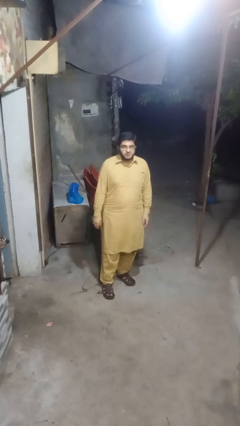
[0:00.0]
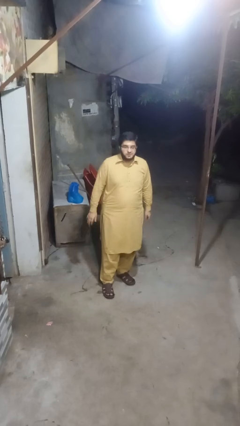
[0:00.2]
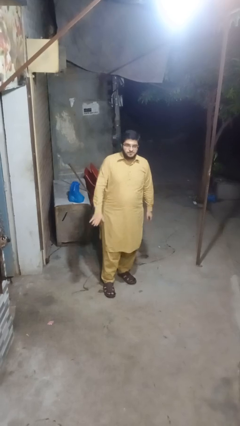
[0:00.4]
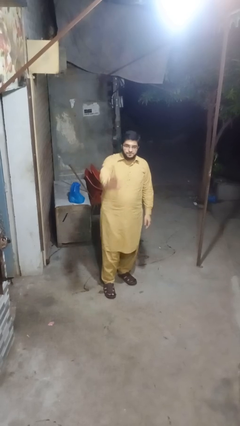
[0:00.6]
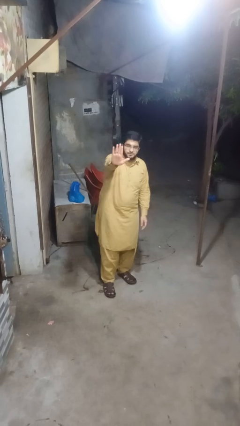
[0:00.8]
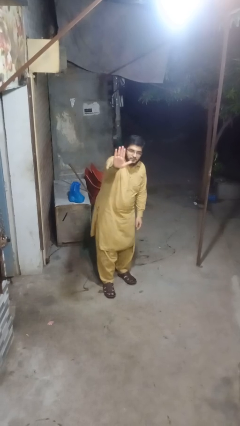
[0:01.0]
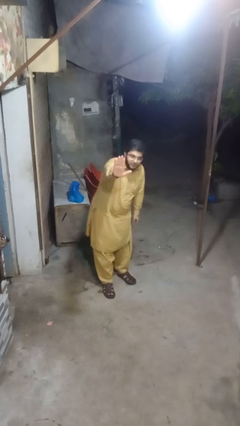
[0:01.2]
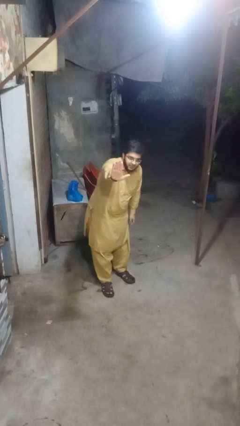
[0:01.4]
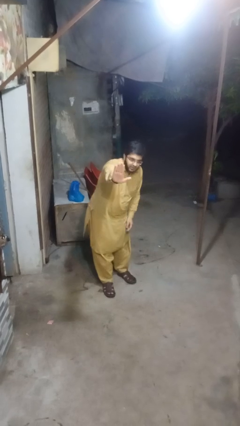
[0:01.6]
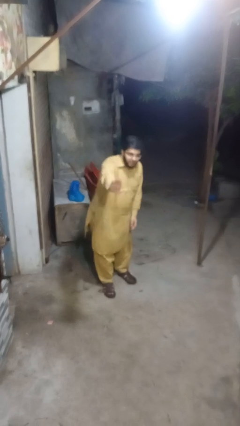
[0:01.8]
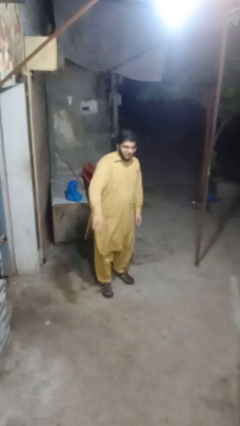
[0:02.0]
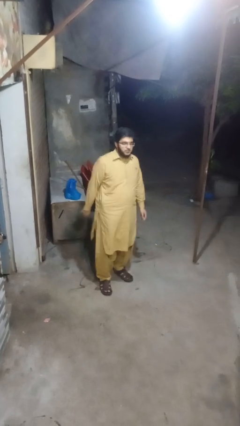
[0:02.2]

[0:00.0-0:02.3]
person gestures stop

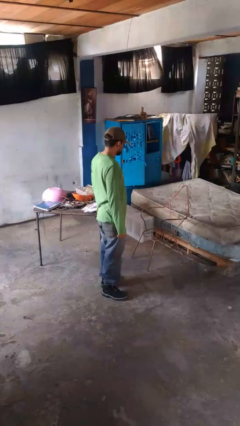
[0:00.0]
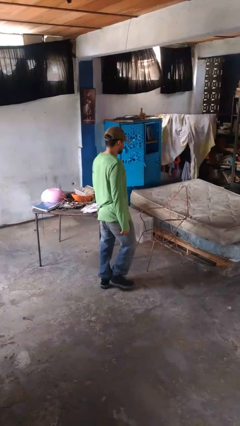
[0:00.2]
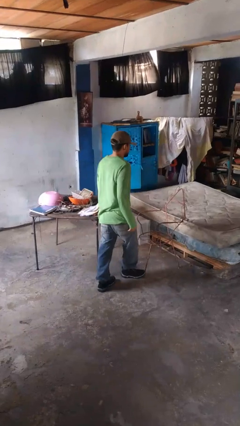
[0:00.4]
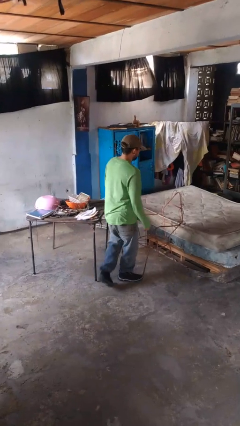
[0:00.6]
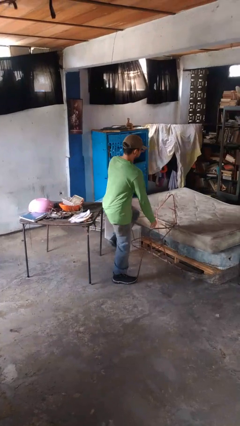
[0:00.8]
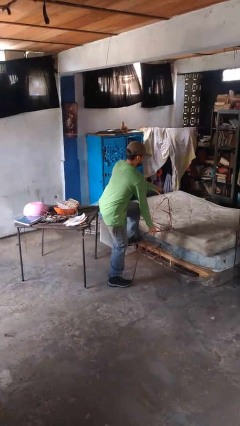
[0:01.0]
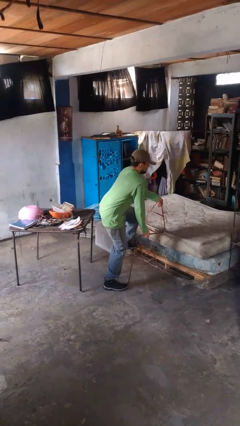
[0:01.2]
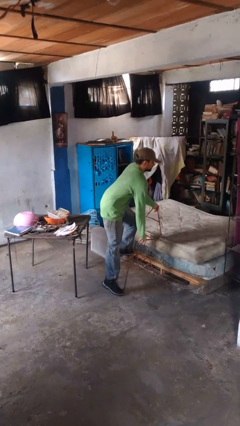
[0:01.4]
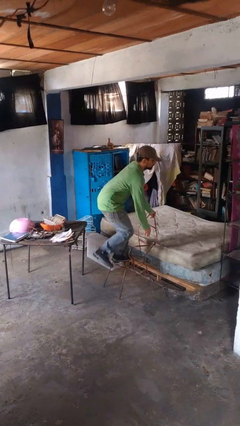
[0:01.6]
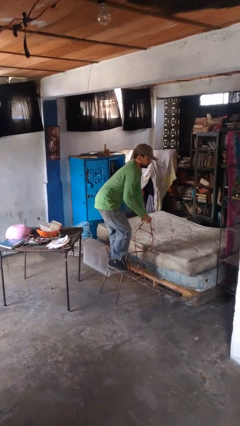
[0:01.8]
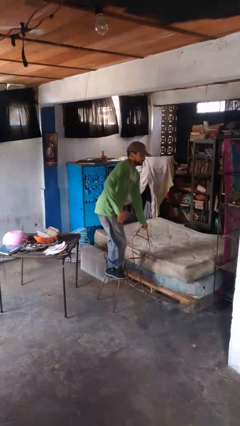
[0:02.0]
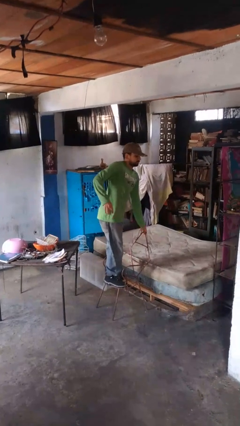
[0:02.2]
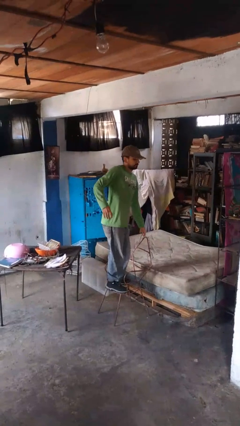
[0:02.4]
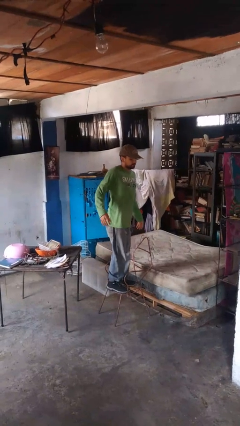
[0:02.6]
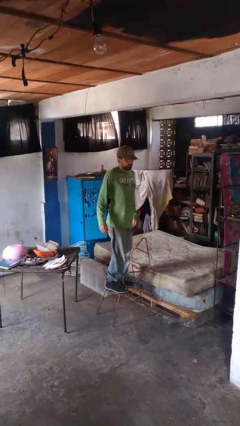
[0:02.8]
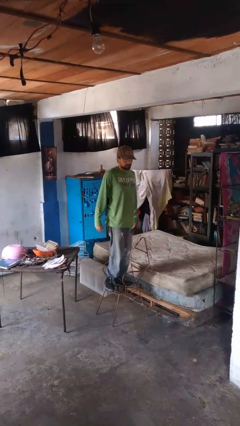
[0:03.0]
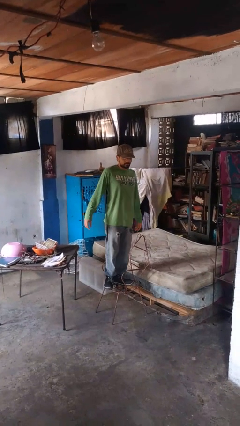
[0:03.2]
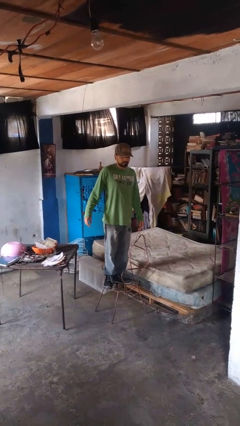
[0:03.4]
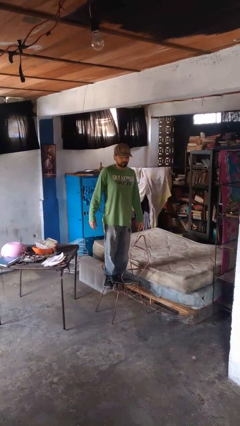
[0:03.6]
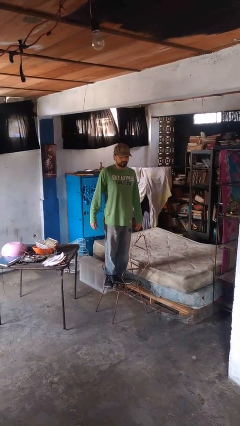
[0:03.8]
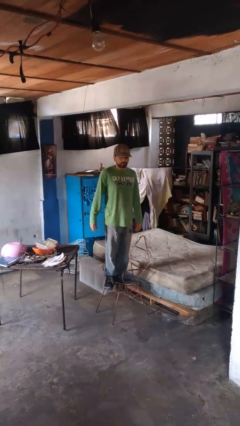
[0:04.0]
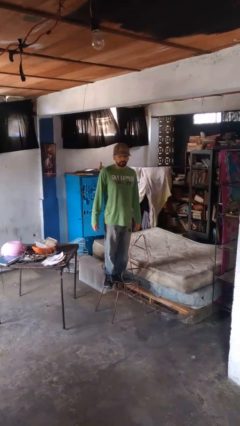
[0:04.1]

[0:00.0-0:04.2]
person climbs on chair

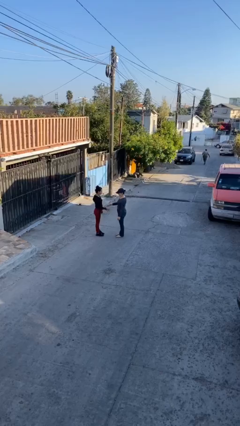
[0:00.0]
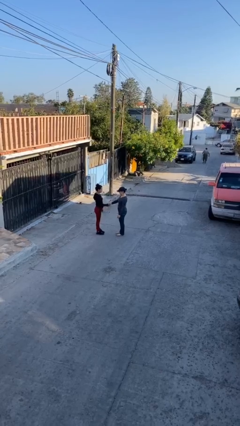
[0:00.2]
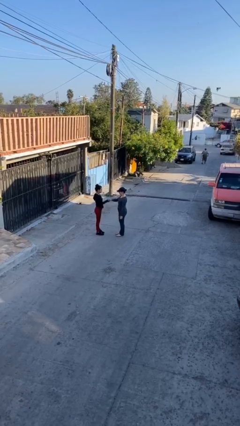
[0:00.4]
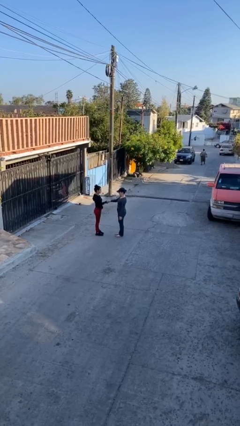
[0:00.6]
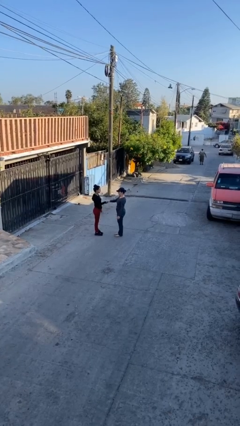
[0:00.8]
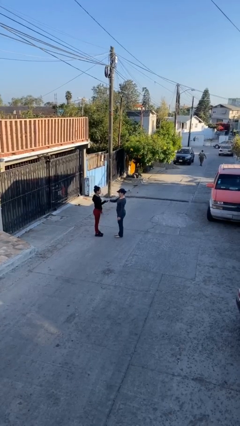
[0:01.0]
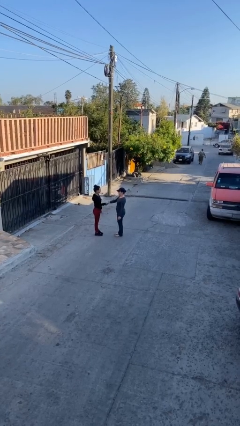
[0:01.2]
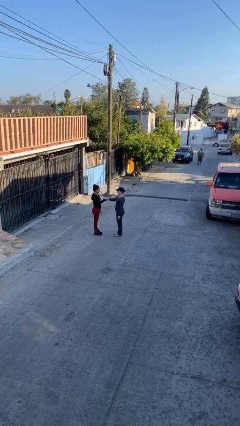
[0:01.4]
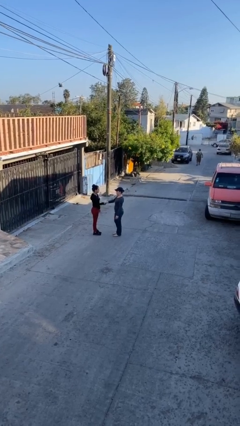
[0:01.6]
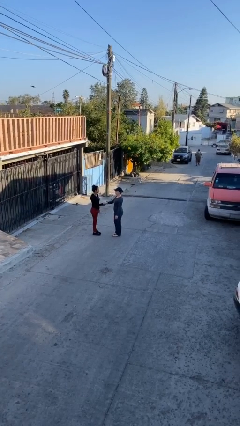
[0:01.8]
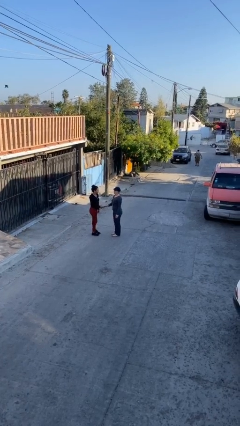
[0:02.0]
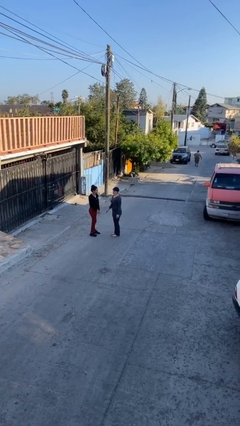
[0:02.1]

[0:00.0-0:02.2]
person shakes hand

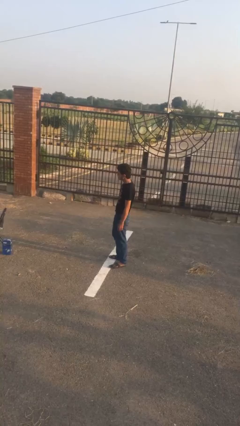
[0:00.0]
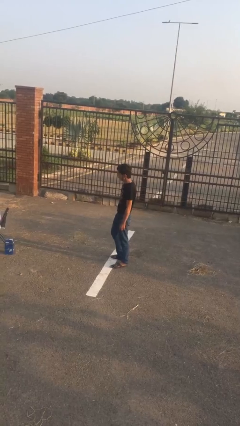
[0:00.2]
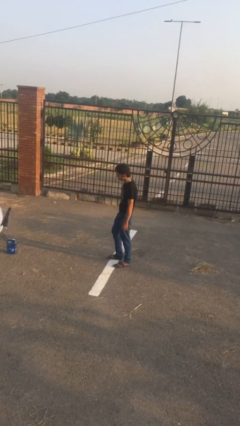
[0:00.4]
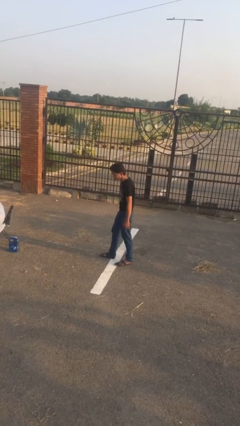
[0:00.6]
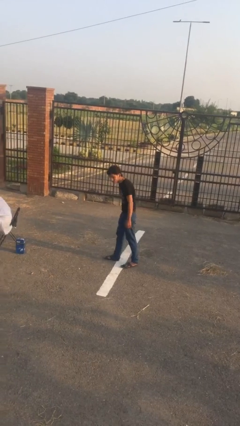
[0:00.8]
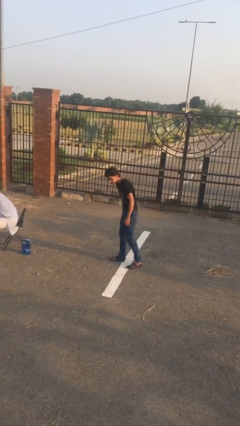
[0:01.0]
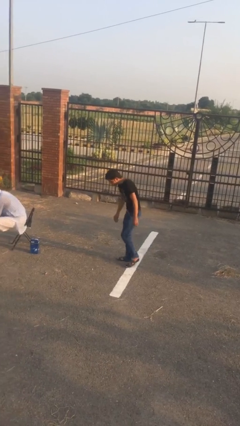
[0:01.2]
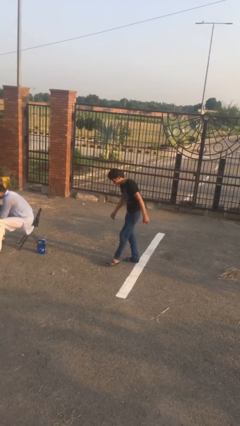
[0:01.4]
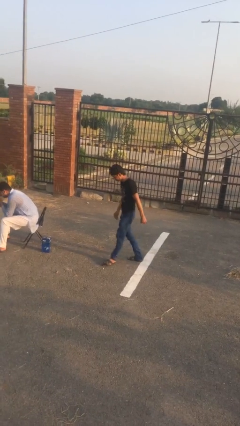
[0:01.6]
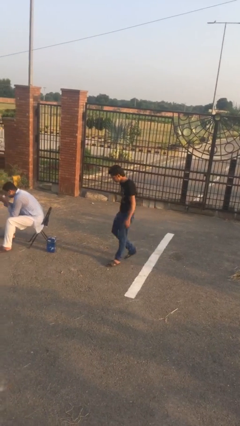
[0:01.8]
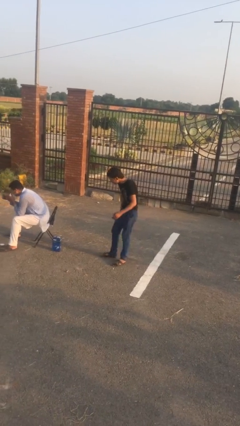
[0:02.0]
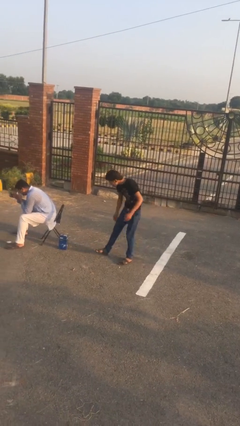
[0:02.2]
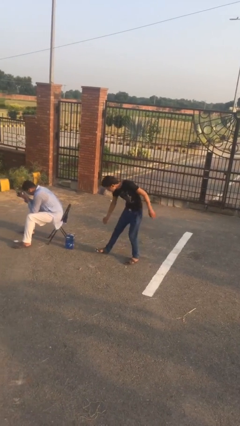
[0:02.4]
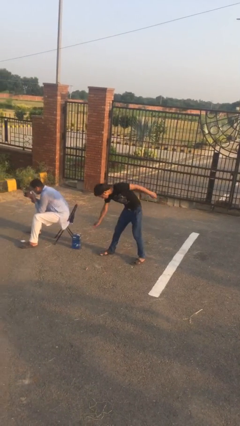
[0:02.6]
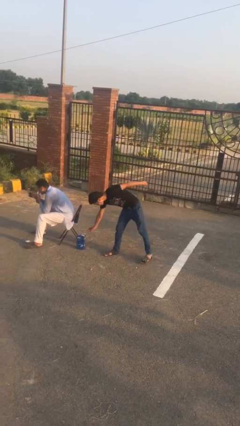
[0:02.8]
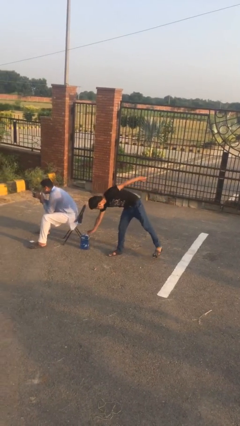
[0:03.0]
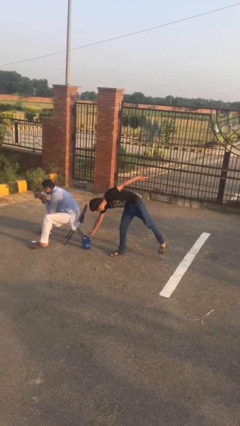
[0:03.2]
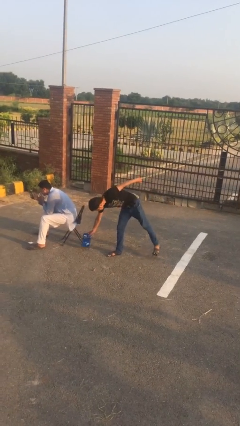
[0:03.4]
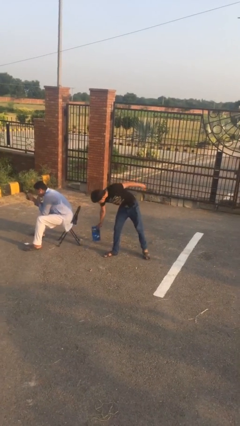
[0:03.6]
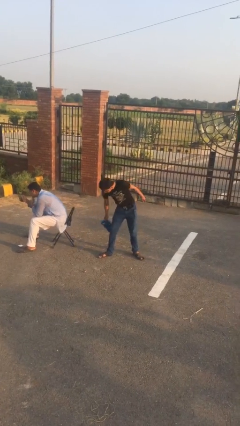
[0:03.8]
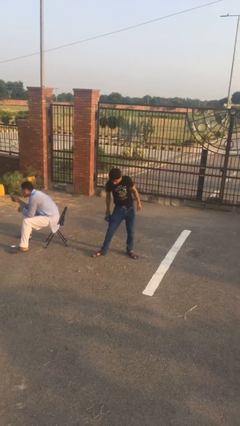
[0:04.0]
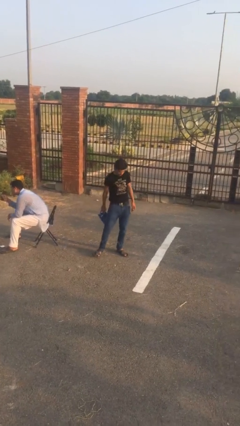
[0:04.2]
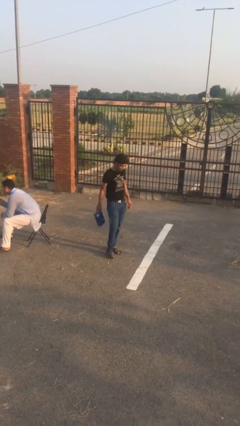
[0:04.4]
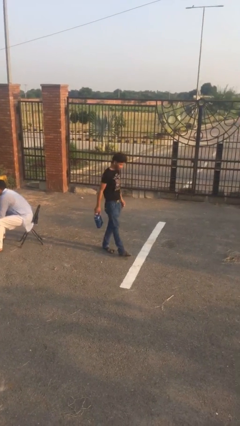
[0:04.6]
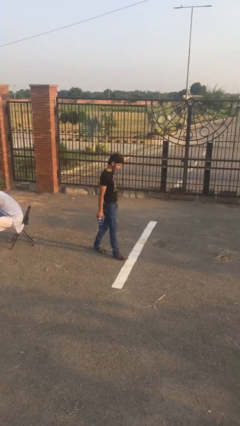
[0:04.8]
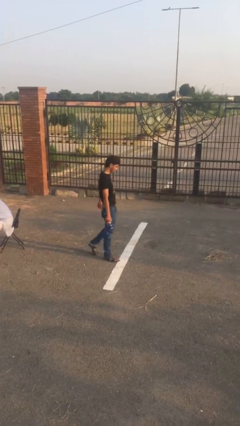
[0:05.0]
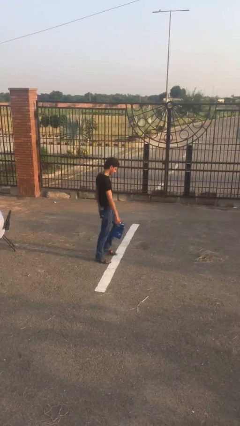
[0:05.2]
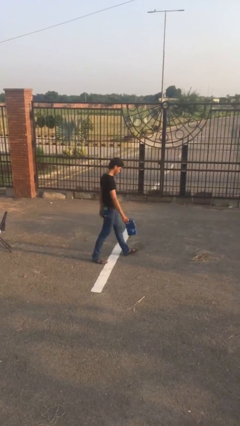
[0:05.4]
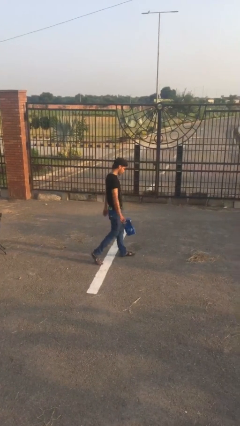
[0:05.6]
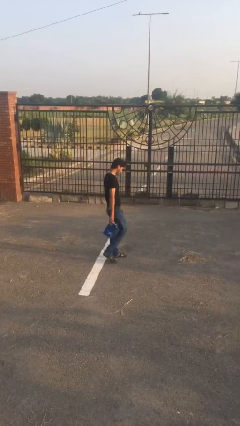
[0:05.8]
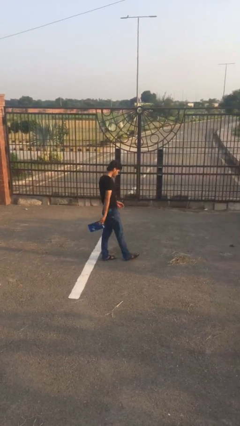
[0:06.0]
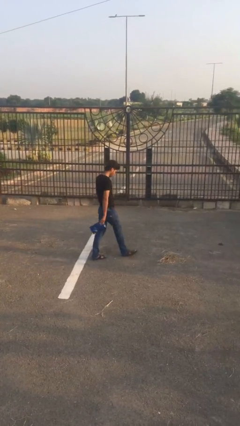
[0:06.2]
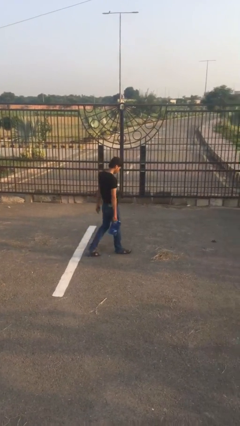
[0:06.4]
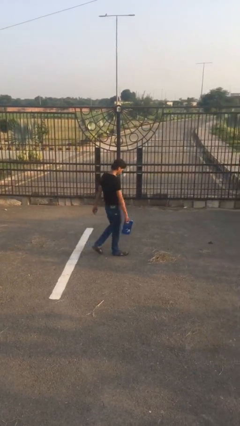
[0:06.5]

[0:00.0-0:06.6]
person steals object from person

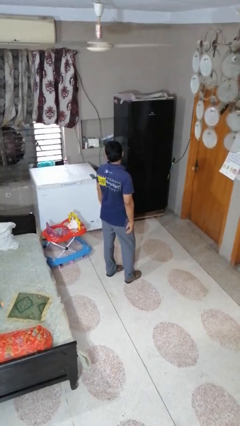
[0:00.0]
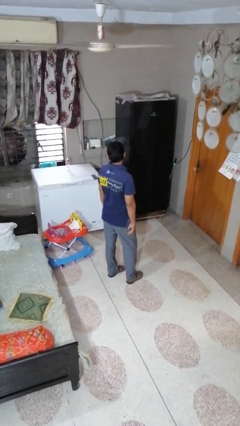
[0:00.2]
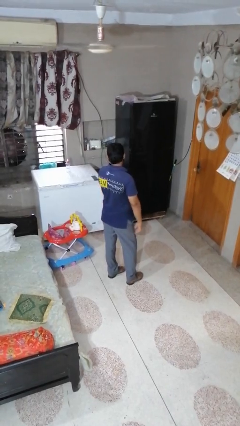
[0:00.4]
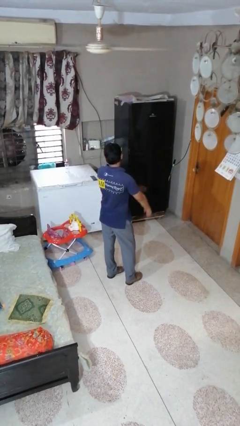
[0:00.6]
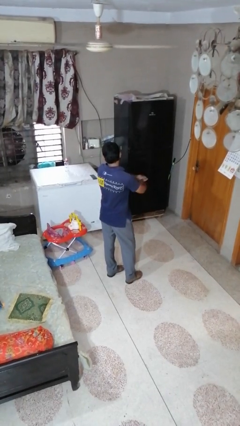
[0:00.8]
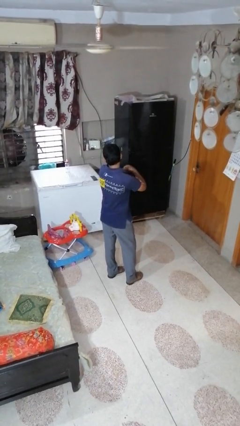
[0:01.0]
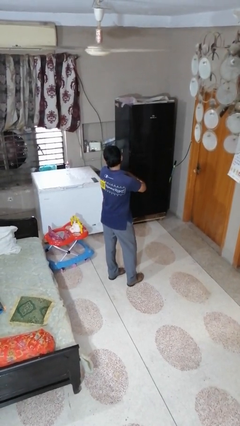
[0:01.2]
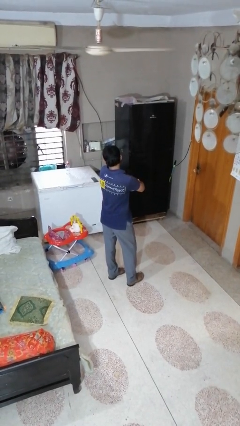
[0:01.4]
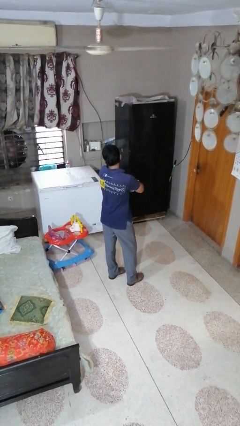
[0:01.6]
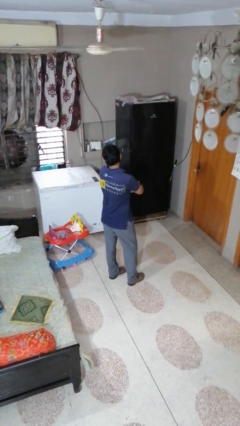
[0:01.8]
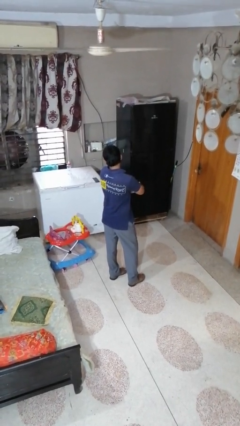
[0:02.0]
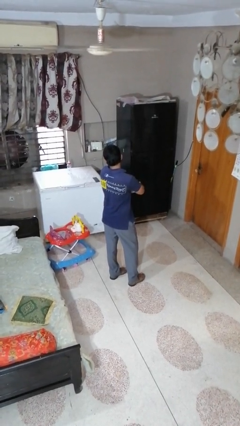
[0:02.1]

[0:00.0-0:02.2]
person crosses arms
